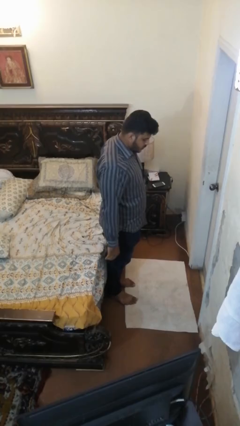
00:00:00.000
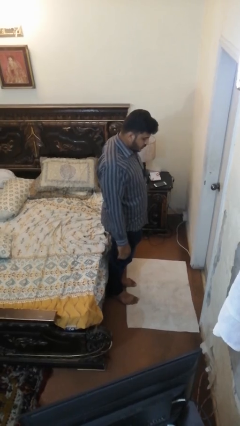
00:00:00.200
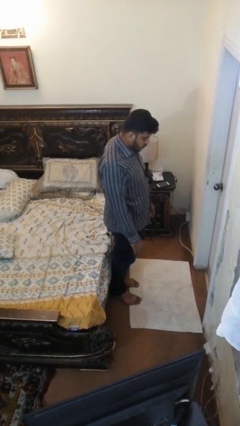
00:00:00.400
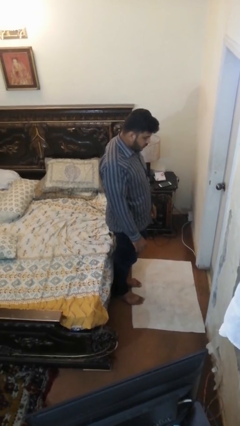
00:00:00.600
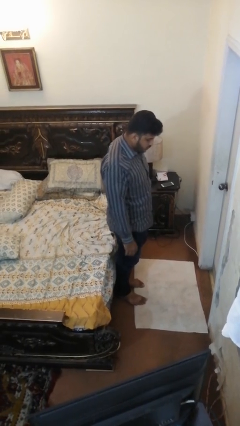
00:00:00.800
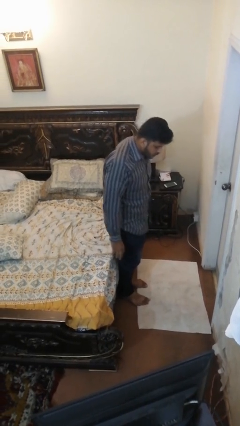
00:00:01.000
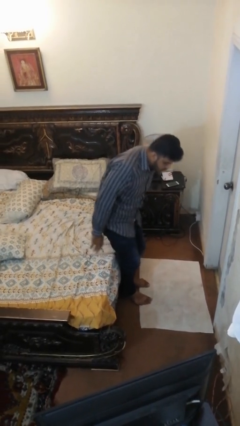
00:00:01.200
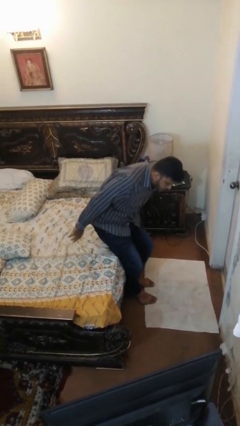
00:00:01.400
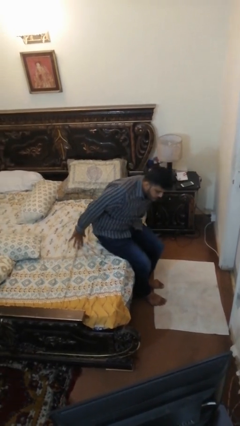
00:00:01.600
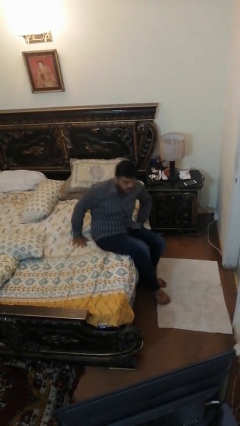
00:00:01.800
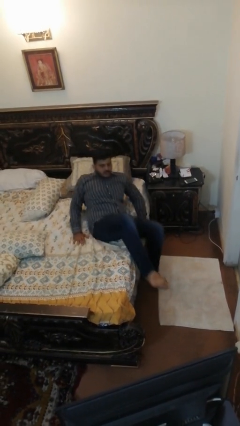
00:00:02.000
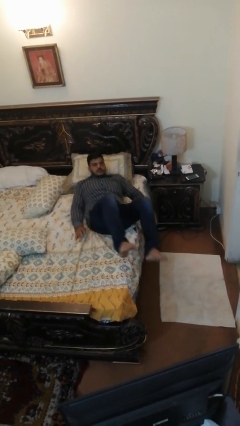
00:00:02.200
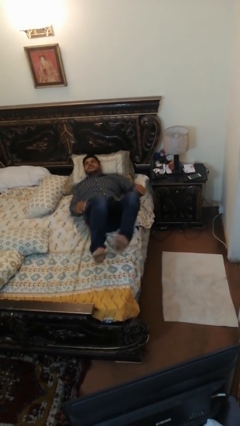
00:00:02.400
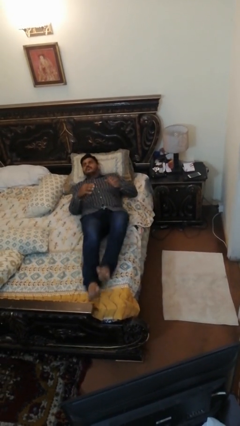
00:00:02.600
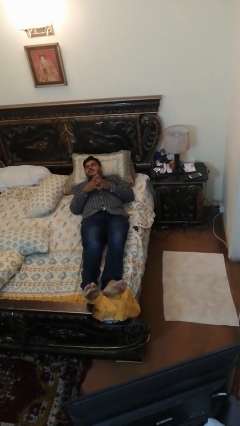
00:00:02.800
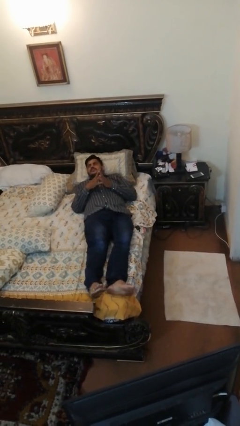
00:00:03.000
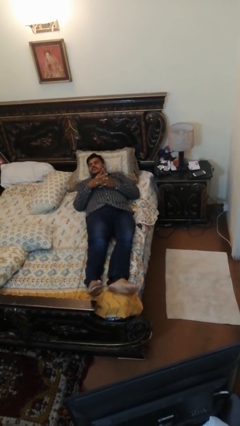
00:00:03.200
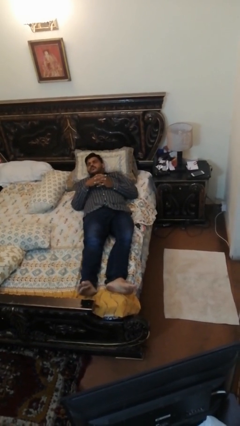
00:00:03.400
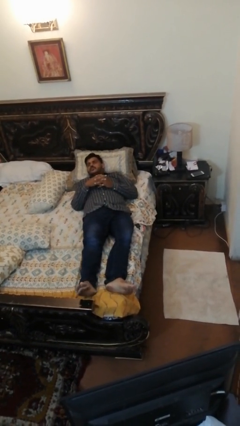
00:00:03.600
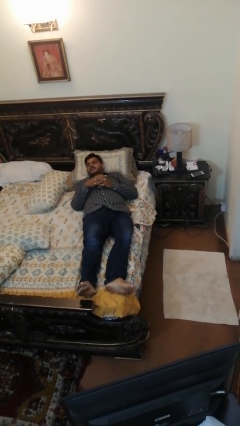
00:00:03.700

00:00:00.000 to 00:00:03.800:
person lies down on bed

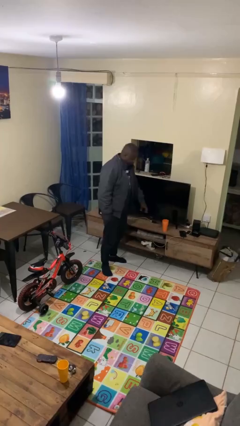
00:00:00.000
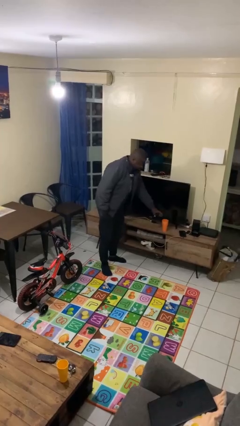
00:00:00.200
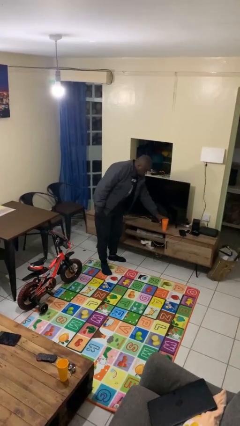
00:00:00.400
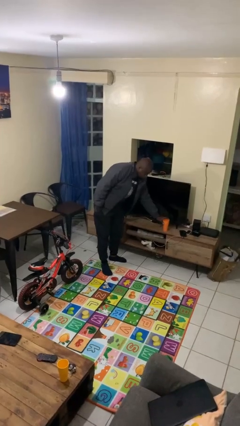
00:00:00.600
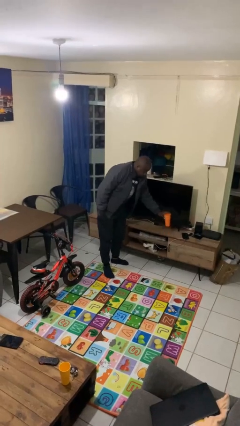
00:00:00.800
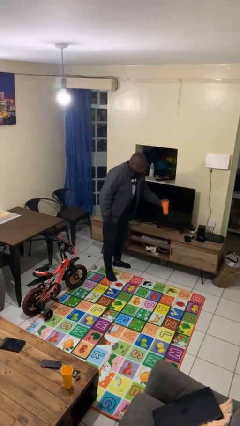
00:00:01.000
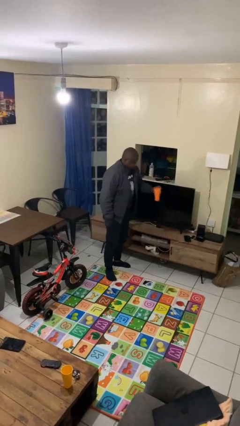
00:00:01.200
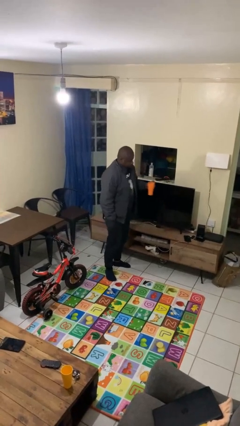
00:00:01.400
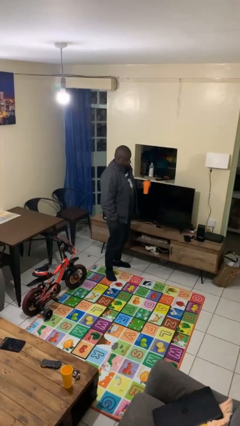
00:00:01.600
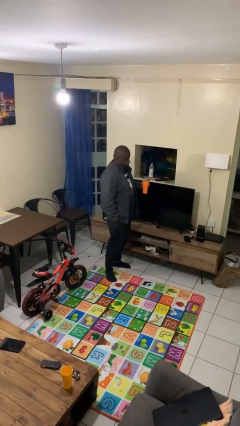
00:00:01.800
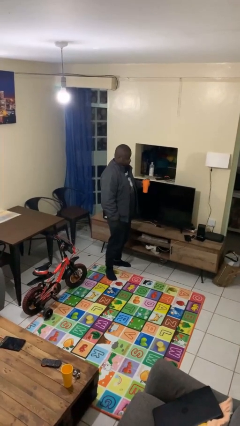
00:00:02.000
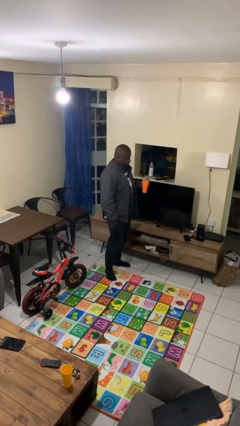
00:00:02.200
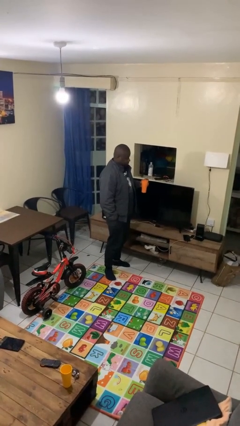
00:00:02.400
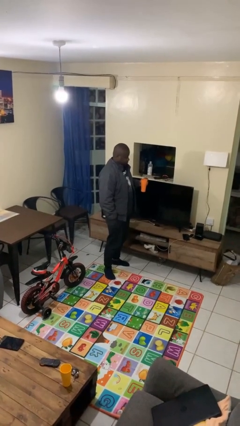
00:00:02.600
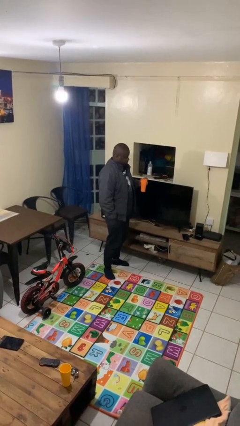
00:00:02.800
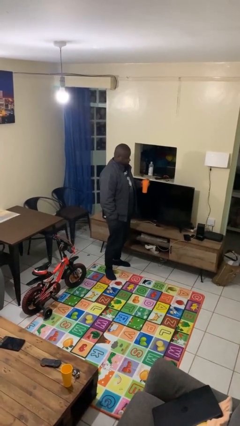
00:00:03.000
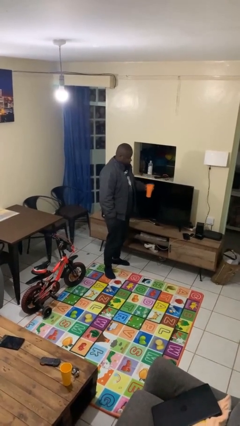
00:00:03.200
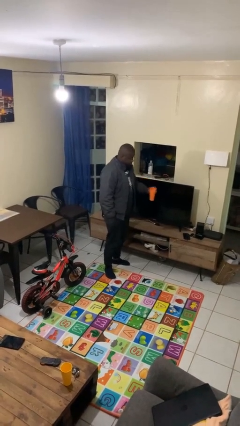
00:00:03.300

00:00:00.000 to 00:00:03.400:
person picks up object from countertop

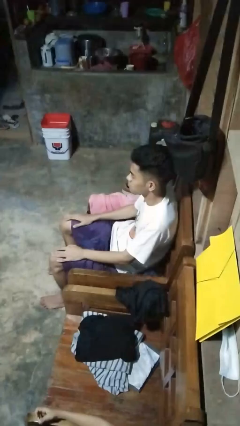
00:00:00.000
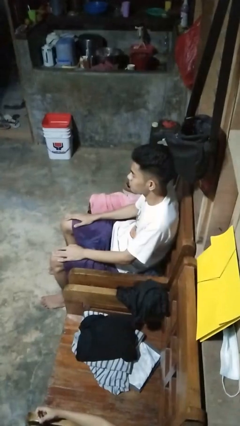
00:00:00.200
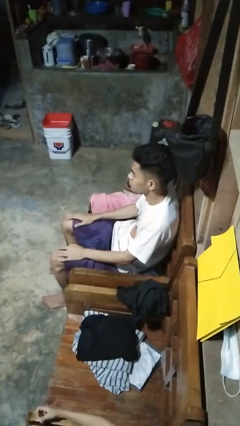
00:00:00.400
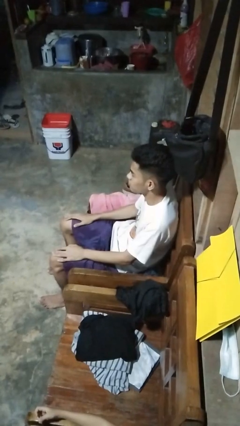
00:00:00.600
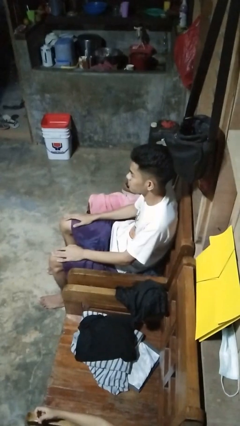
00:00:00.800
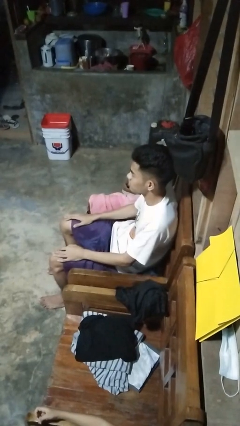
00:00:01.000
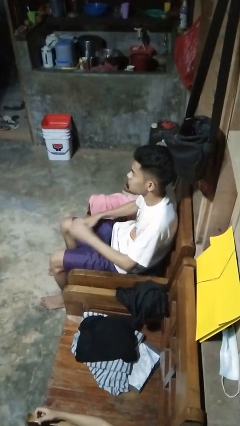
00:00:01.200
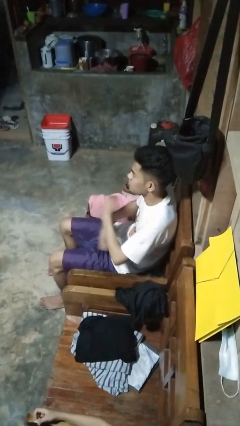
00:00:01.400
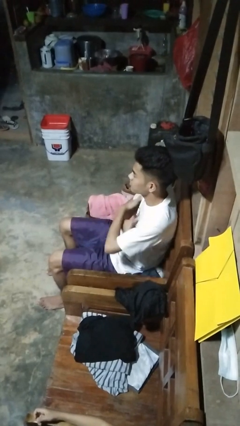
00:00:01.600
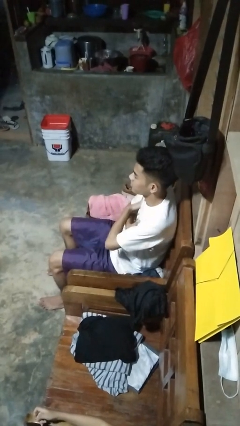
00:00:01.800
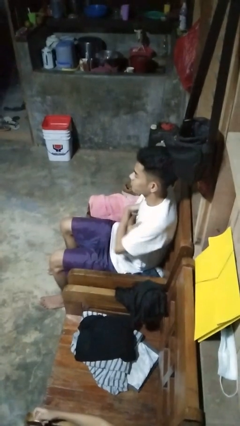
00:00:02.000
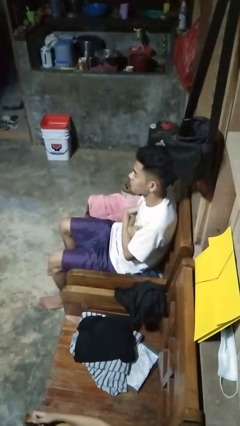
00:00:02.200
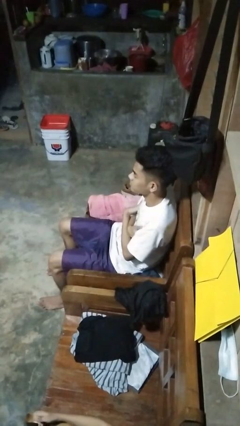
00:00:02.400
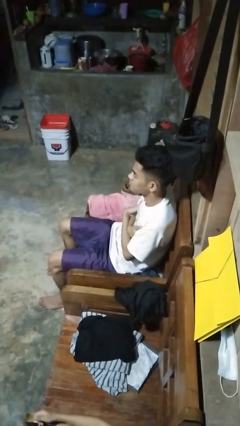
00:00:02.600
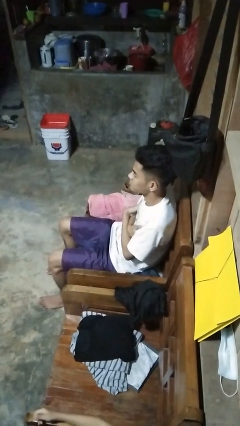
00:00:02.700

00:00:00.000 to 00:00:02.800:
person crosses arms

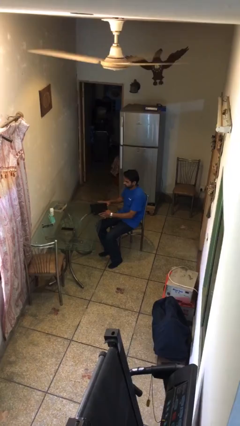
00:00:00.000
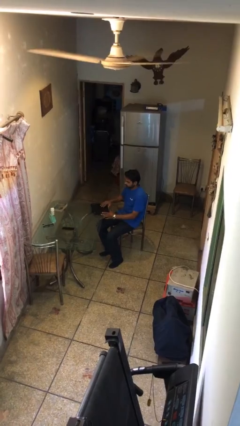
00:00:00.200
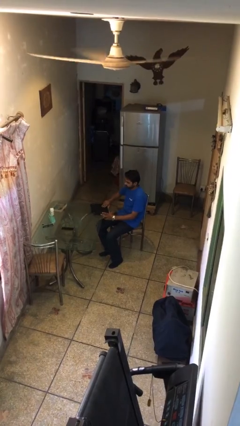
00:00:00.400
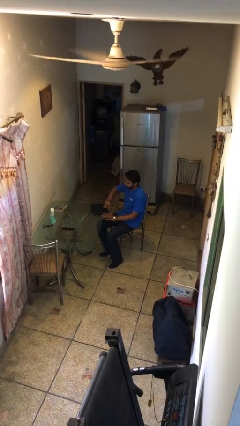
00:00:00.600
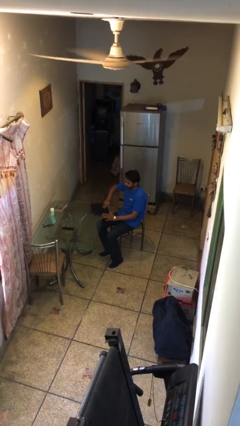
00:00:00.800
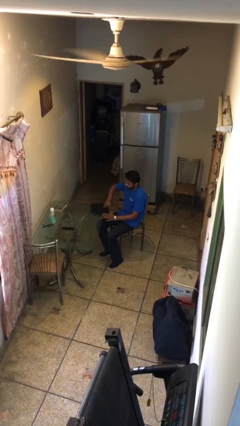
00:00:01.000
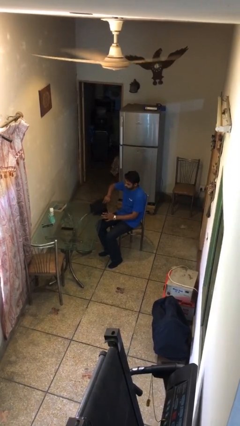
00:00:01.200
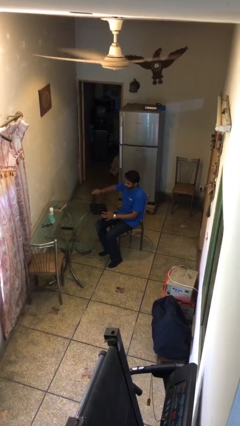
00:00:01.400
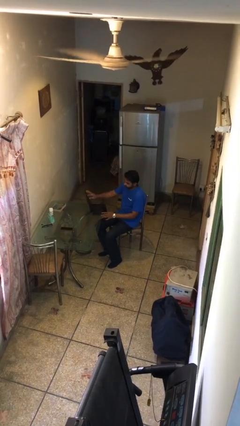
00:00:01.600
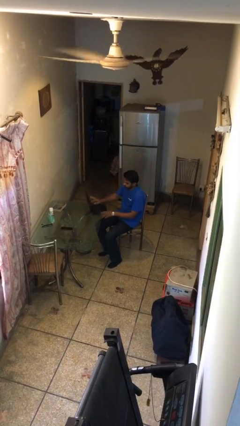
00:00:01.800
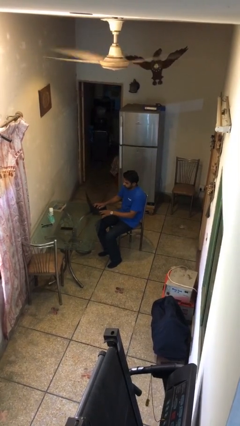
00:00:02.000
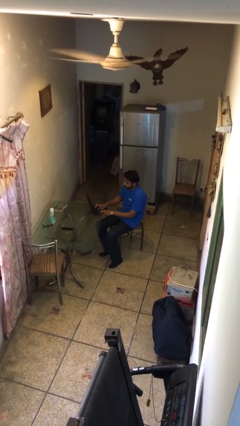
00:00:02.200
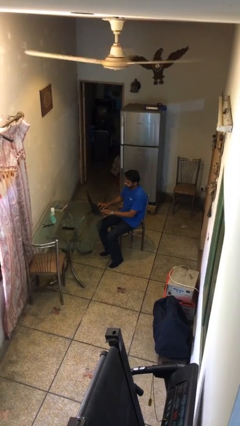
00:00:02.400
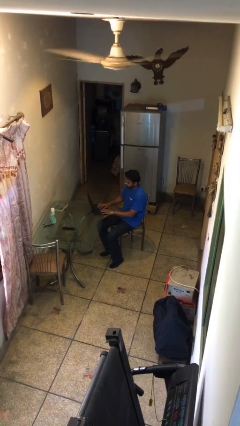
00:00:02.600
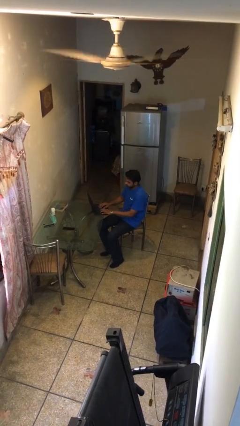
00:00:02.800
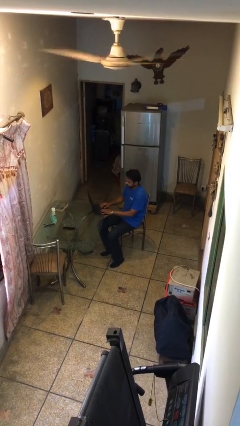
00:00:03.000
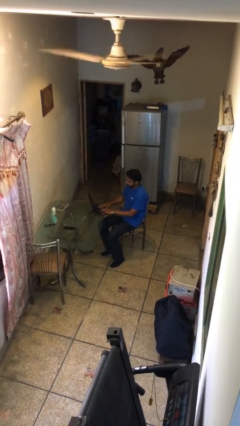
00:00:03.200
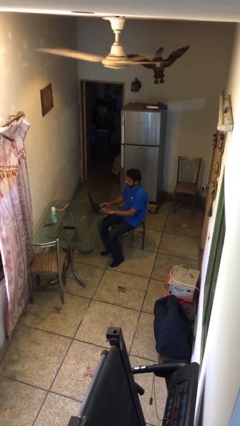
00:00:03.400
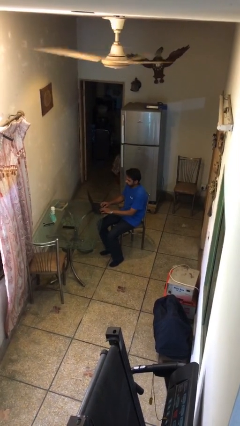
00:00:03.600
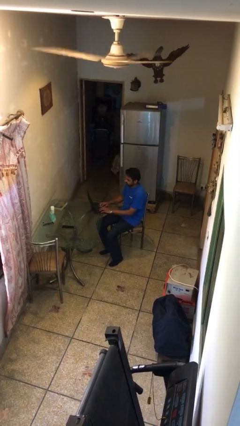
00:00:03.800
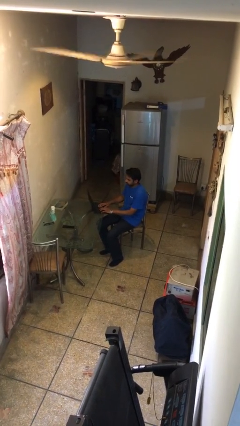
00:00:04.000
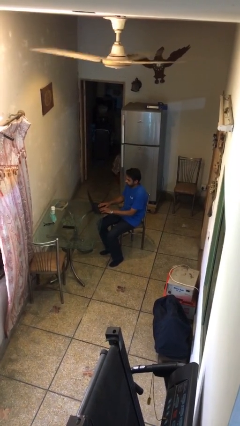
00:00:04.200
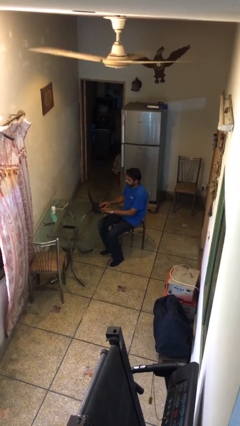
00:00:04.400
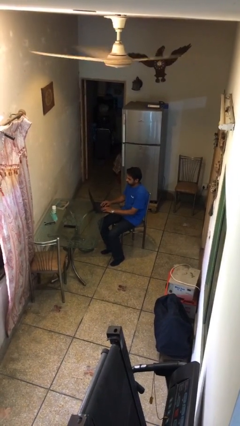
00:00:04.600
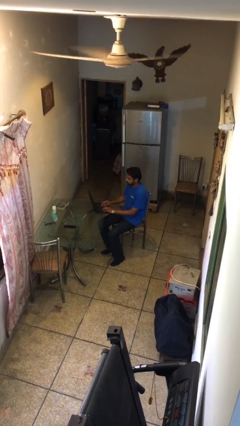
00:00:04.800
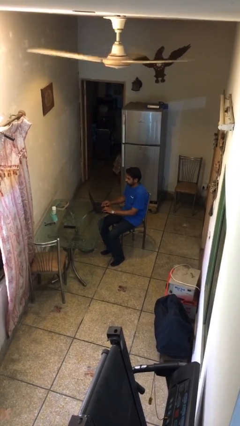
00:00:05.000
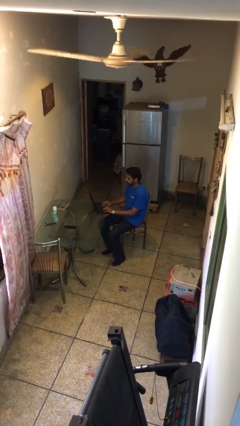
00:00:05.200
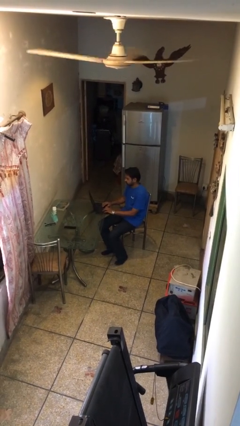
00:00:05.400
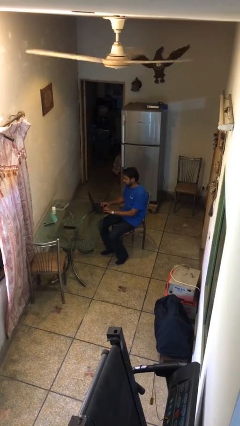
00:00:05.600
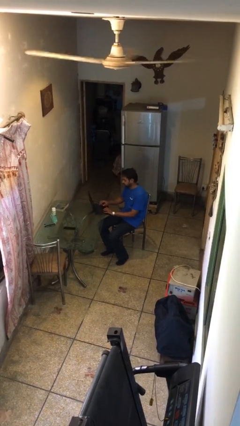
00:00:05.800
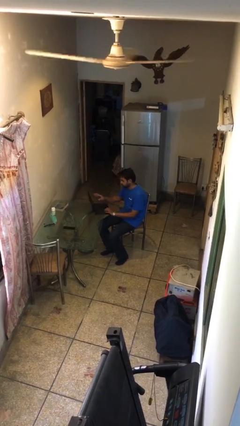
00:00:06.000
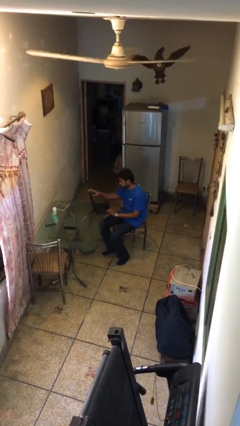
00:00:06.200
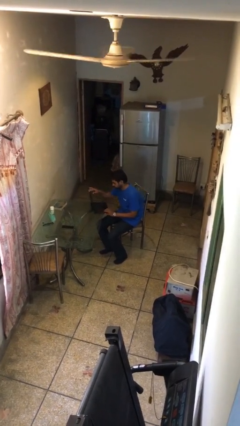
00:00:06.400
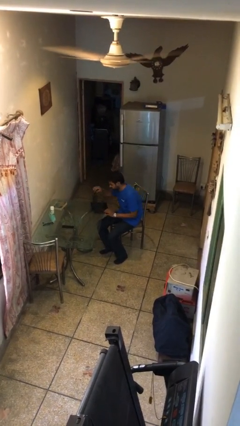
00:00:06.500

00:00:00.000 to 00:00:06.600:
person interacts with laptop

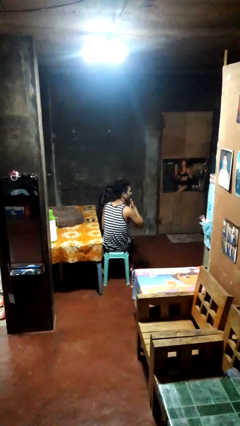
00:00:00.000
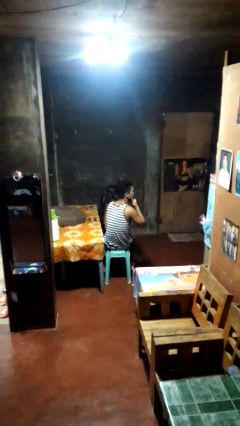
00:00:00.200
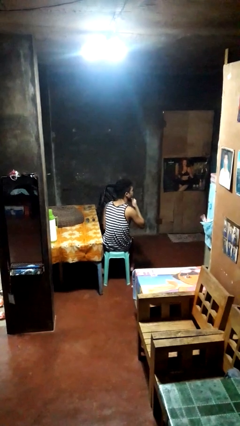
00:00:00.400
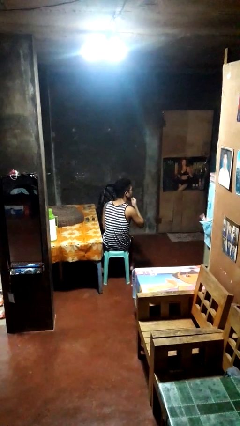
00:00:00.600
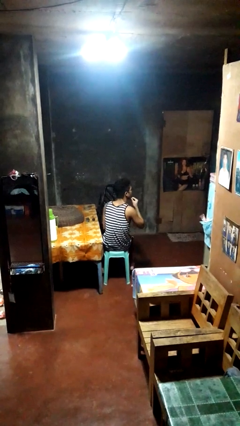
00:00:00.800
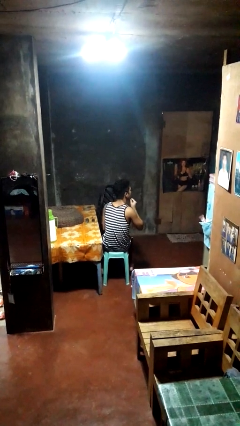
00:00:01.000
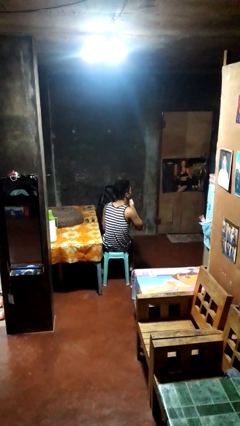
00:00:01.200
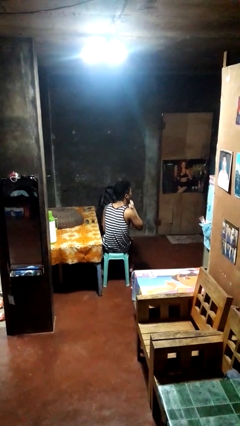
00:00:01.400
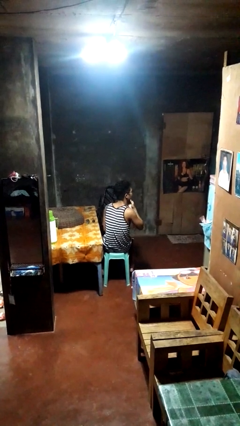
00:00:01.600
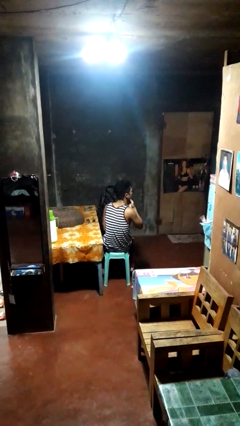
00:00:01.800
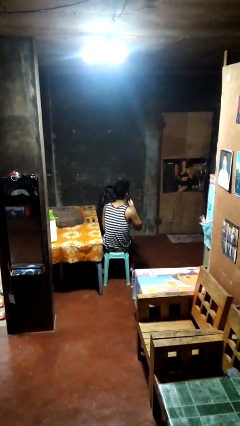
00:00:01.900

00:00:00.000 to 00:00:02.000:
person strokes chin
